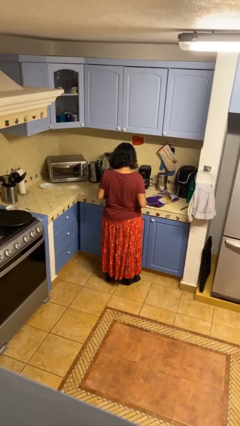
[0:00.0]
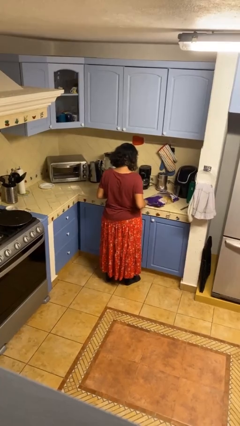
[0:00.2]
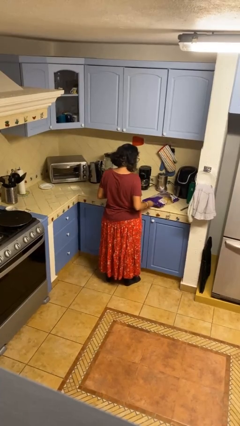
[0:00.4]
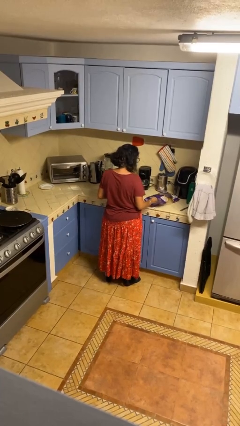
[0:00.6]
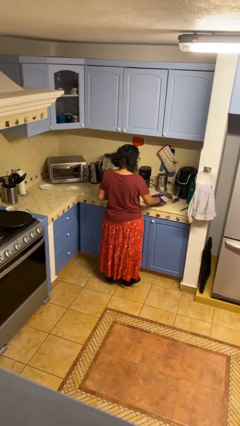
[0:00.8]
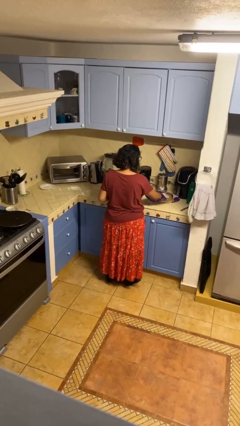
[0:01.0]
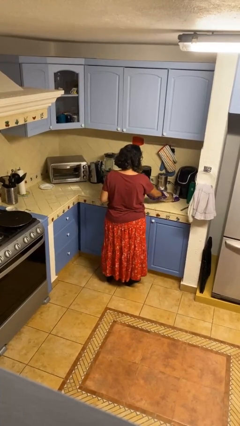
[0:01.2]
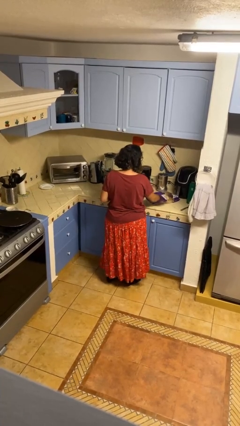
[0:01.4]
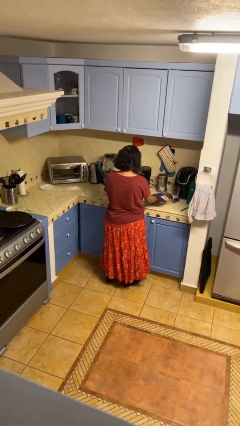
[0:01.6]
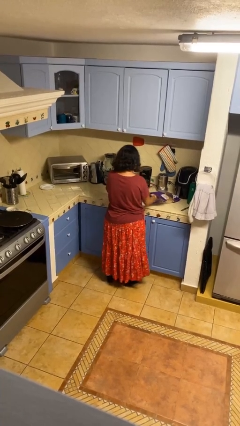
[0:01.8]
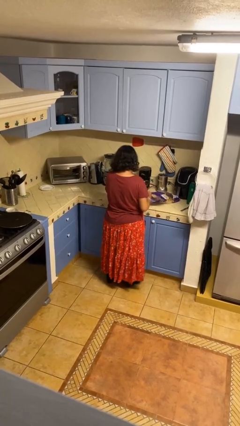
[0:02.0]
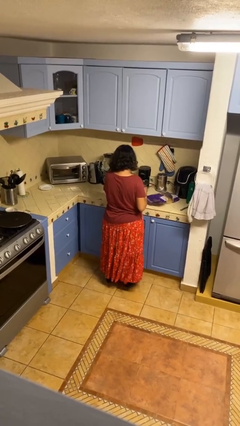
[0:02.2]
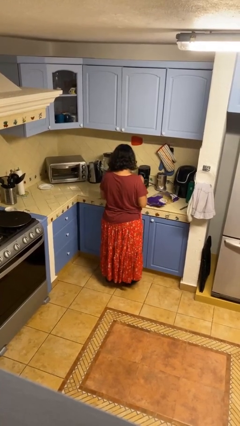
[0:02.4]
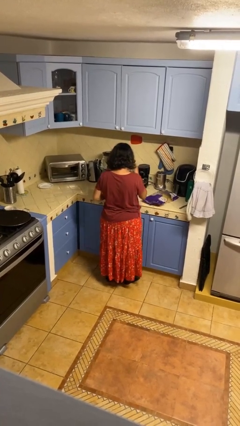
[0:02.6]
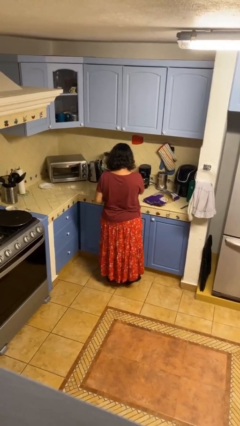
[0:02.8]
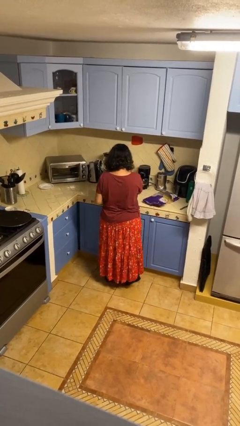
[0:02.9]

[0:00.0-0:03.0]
person eats snack from bag

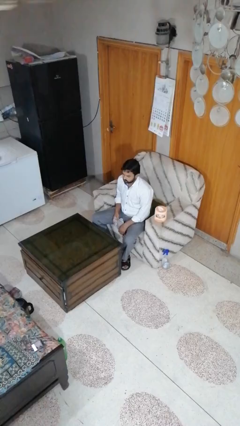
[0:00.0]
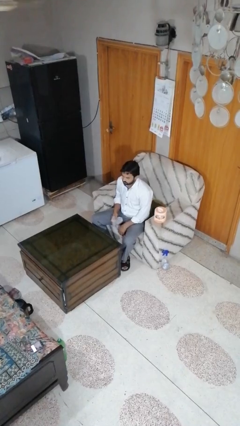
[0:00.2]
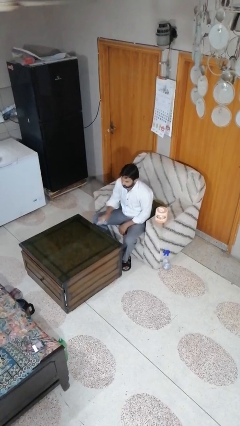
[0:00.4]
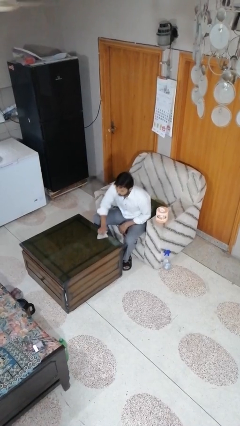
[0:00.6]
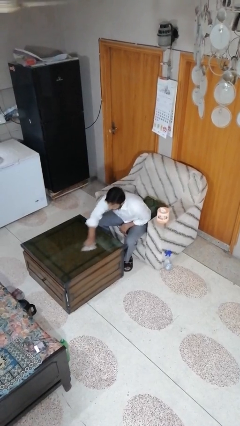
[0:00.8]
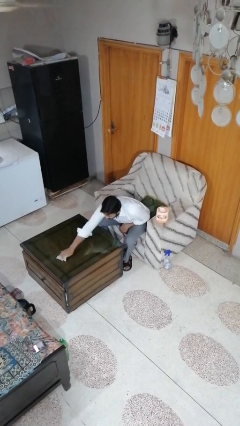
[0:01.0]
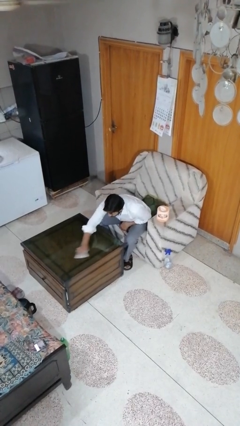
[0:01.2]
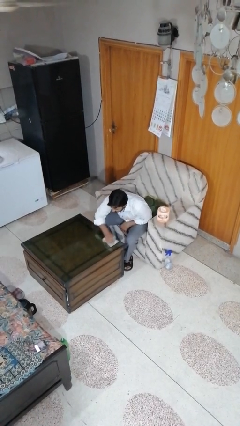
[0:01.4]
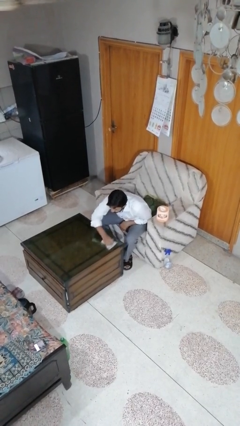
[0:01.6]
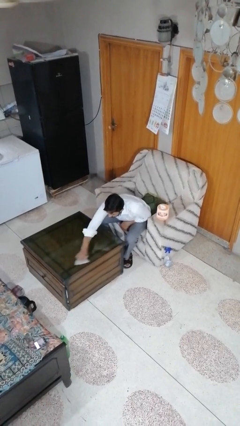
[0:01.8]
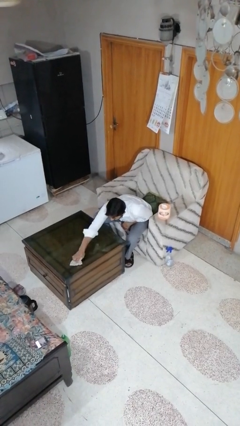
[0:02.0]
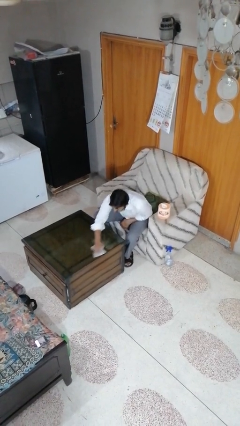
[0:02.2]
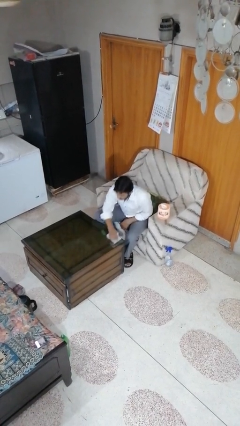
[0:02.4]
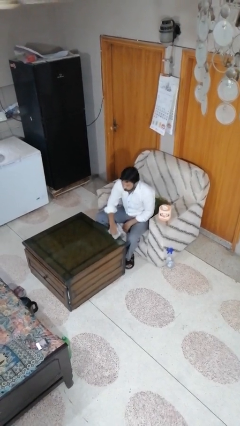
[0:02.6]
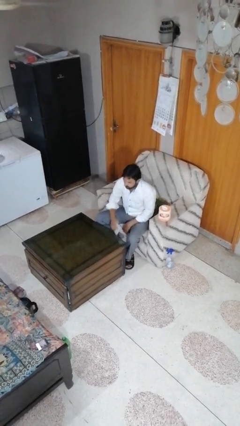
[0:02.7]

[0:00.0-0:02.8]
person cleans table with rag

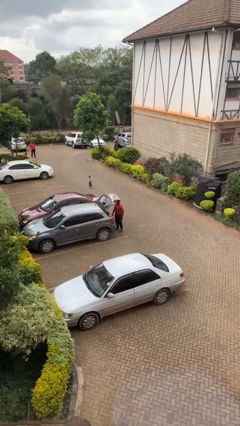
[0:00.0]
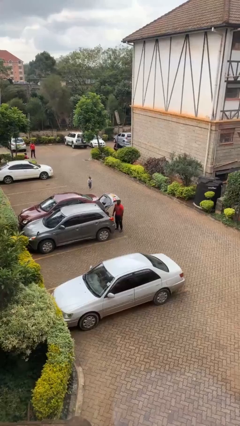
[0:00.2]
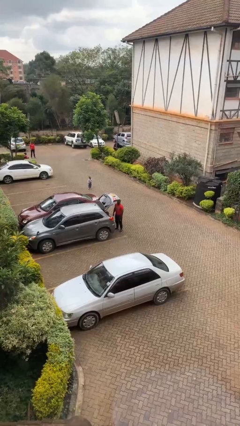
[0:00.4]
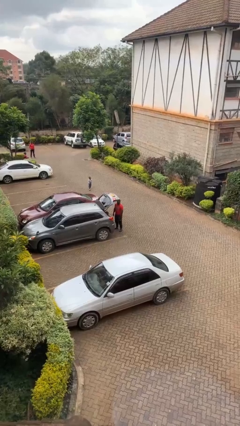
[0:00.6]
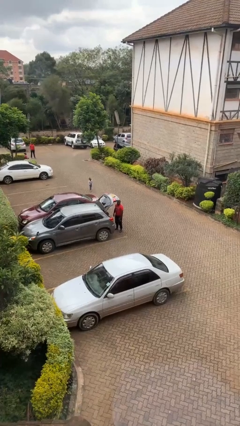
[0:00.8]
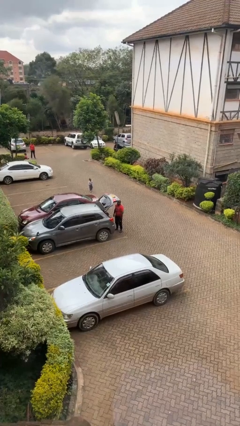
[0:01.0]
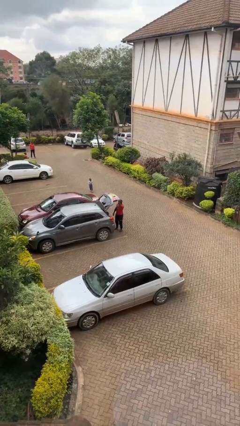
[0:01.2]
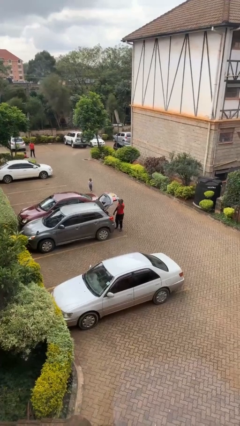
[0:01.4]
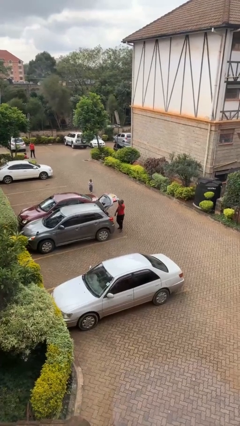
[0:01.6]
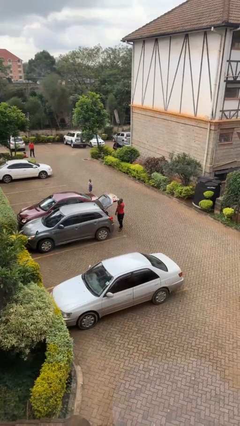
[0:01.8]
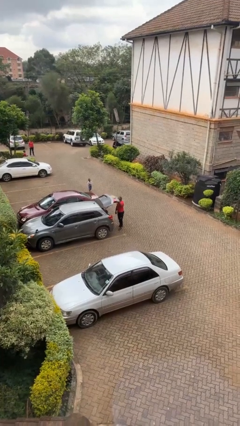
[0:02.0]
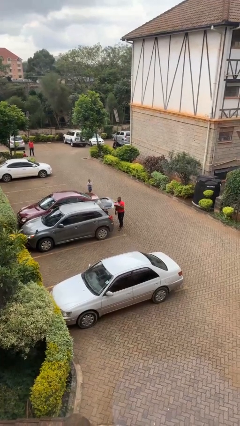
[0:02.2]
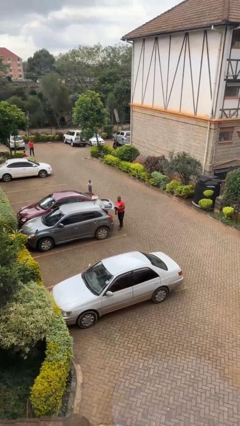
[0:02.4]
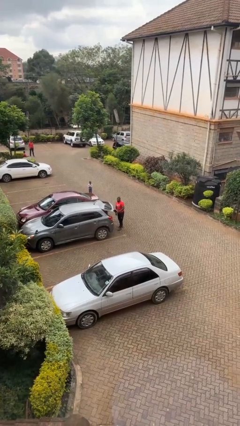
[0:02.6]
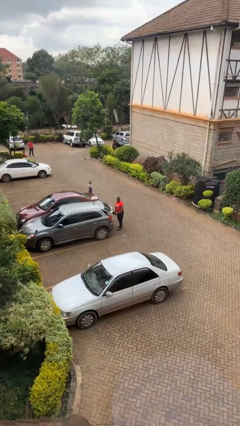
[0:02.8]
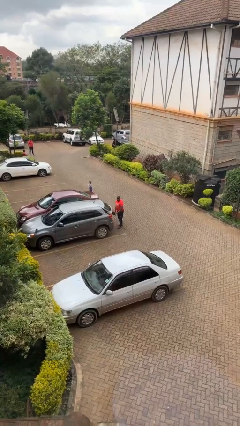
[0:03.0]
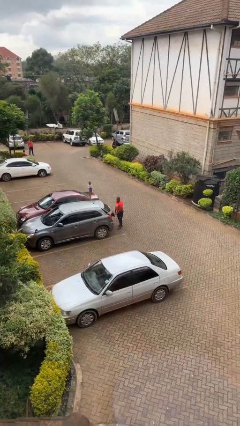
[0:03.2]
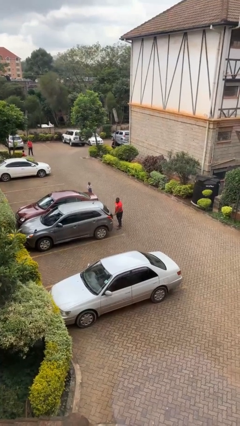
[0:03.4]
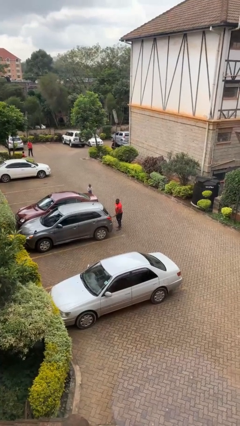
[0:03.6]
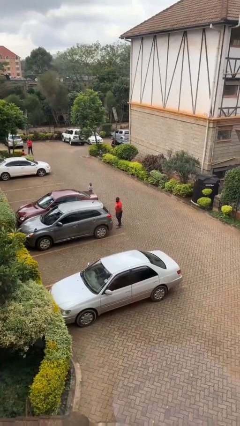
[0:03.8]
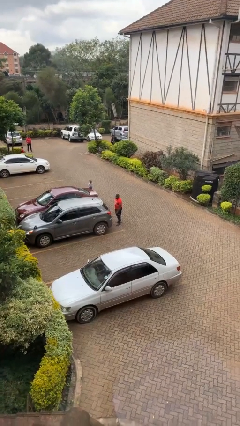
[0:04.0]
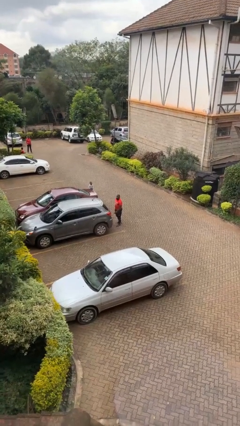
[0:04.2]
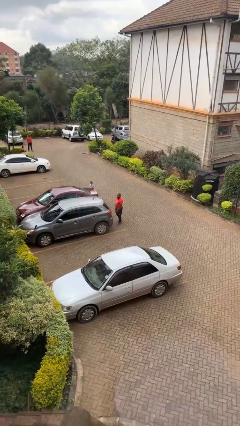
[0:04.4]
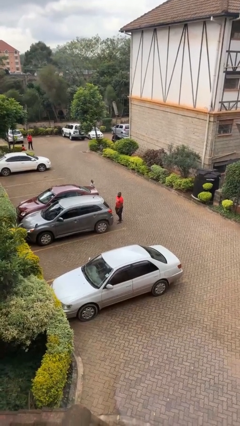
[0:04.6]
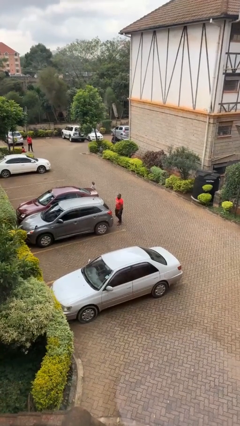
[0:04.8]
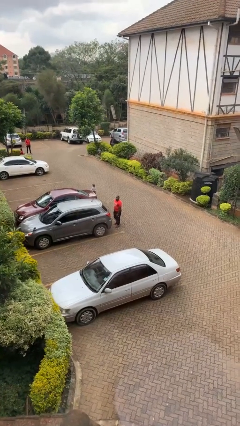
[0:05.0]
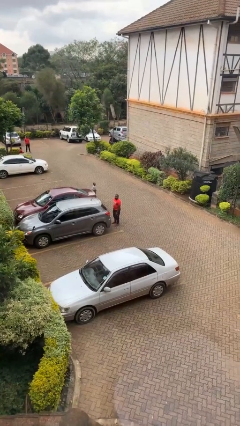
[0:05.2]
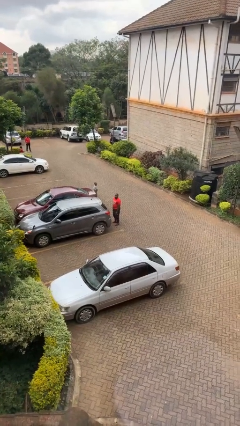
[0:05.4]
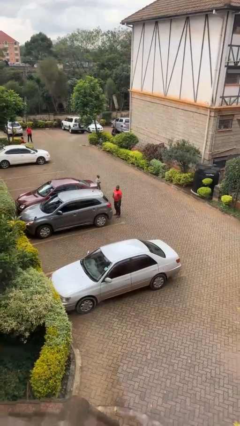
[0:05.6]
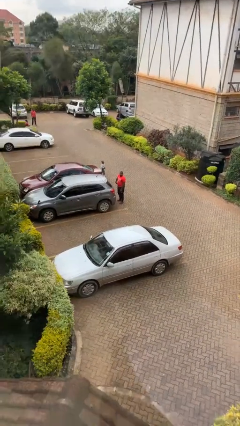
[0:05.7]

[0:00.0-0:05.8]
person closes car trunk

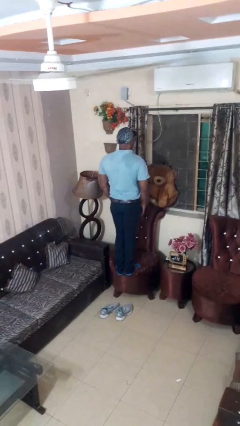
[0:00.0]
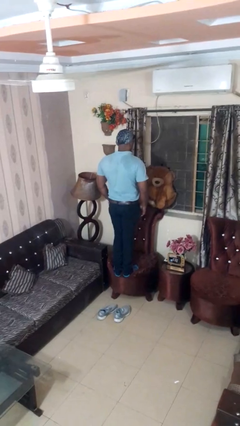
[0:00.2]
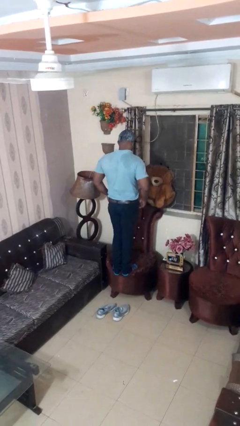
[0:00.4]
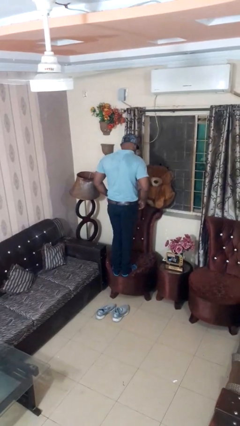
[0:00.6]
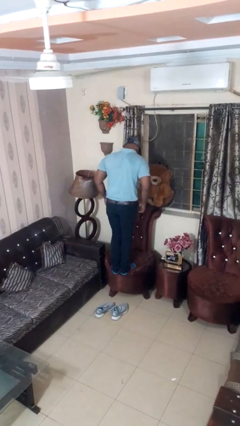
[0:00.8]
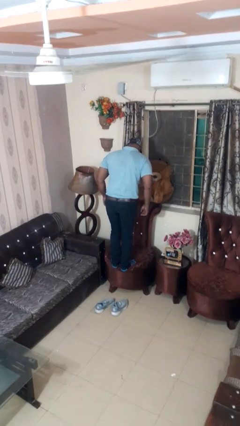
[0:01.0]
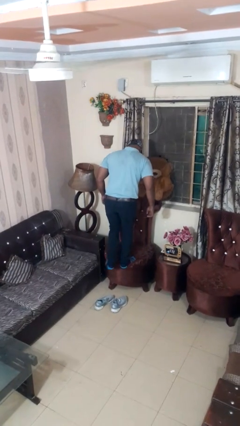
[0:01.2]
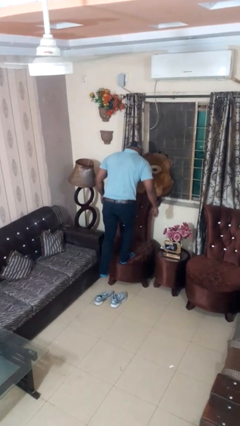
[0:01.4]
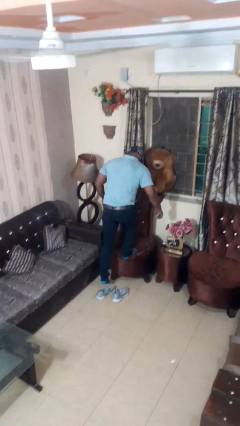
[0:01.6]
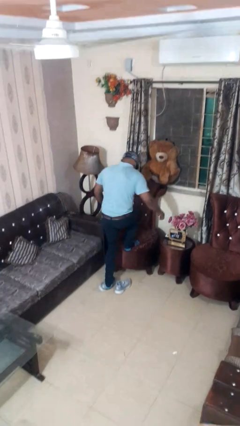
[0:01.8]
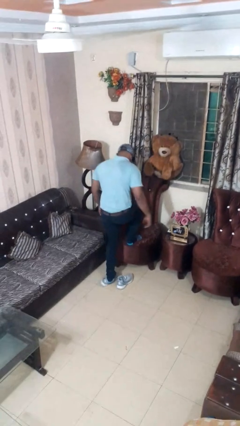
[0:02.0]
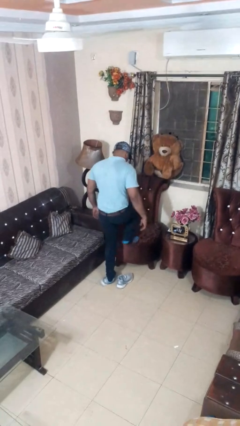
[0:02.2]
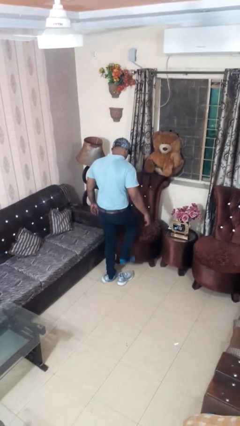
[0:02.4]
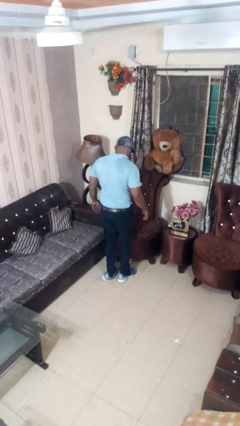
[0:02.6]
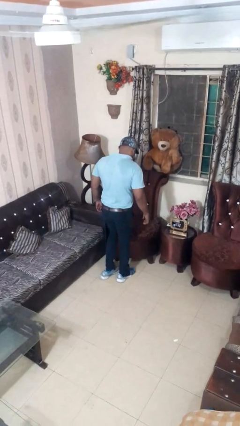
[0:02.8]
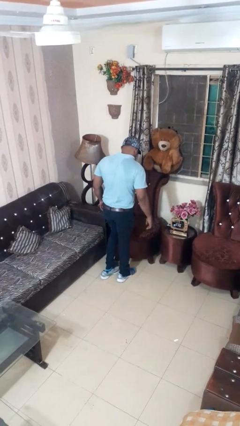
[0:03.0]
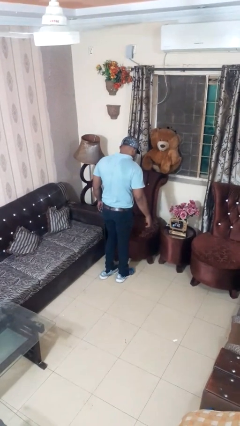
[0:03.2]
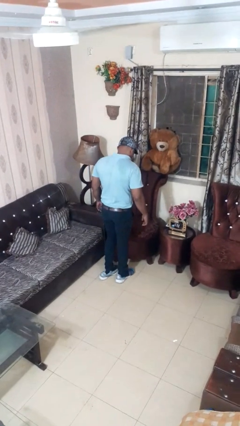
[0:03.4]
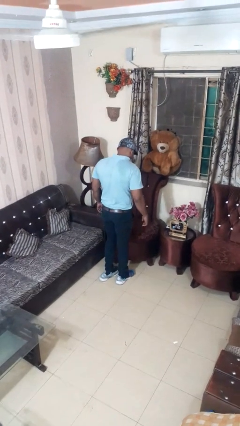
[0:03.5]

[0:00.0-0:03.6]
person climbs off chair

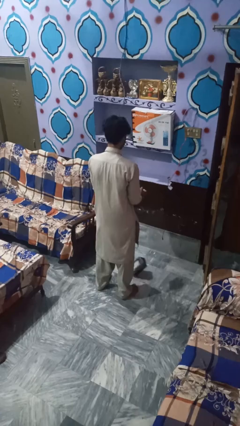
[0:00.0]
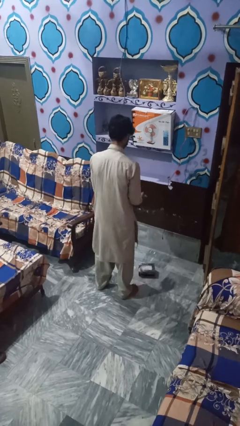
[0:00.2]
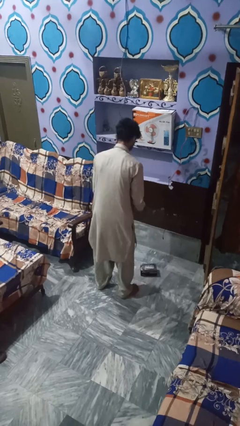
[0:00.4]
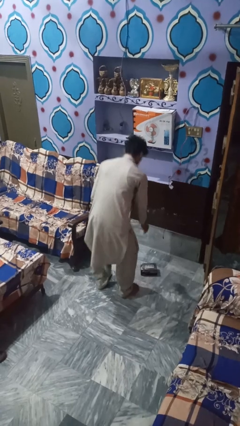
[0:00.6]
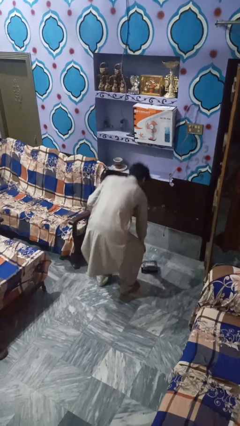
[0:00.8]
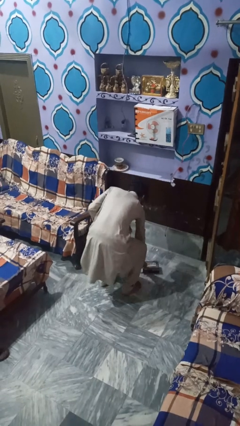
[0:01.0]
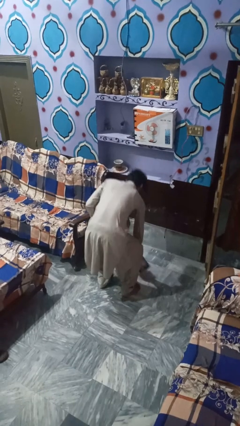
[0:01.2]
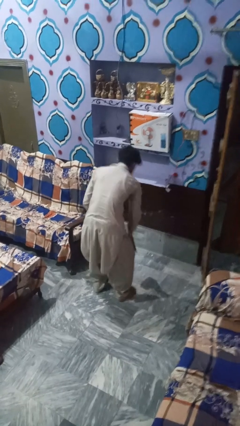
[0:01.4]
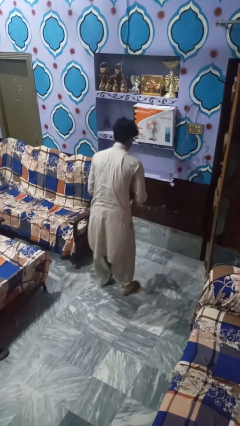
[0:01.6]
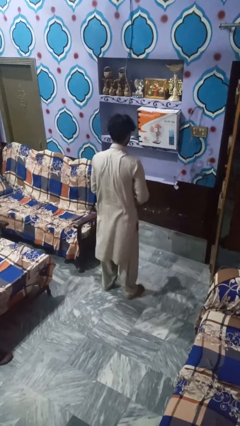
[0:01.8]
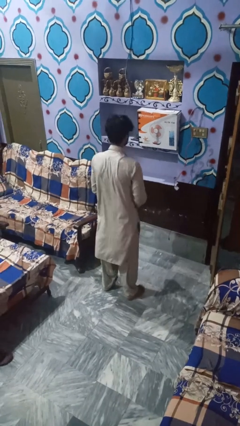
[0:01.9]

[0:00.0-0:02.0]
person picks up object from floor

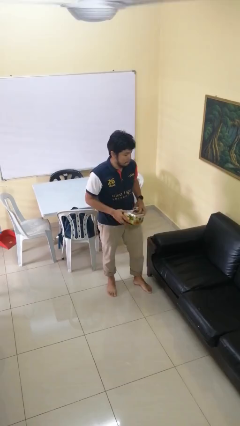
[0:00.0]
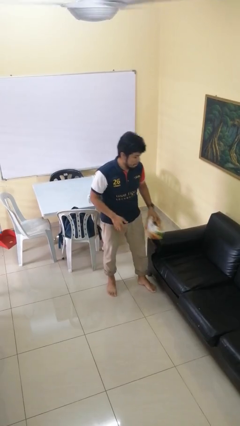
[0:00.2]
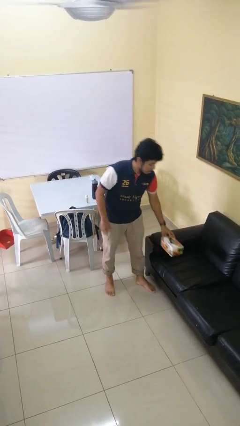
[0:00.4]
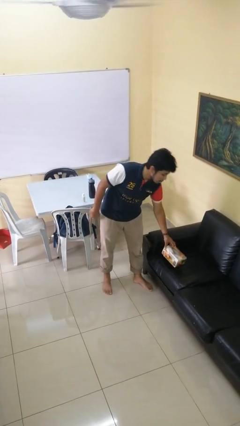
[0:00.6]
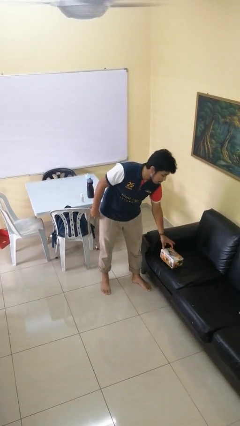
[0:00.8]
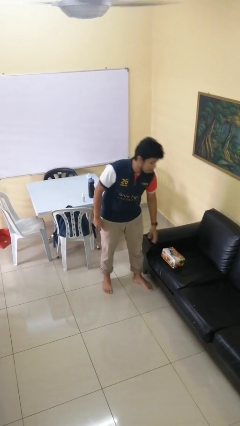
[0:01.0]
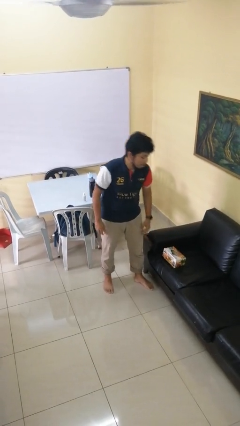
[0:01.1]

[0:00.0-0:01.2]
person puts down object on couch
